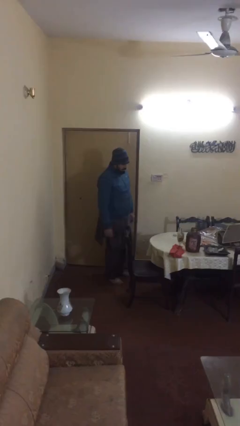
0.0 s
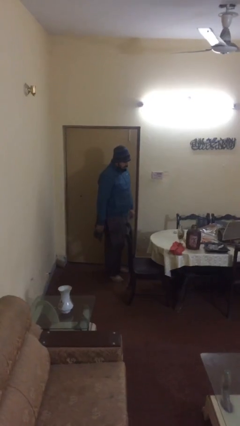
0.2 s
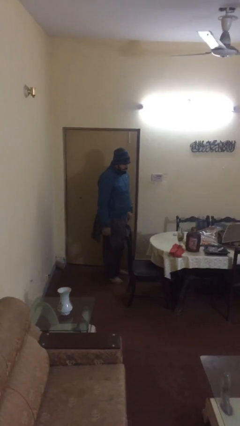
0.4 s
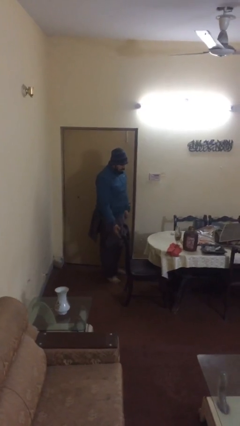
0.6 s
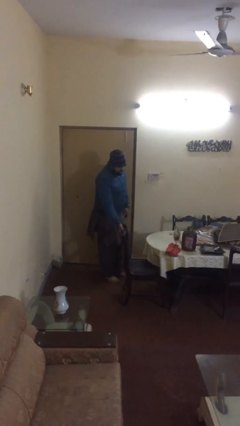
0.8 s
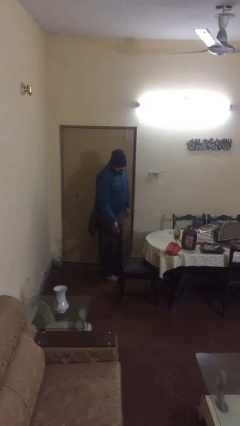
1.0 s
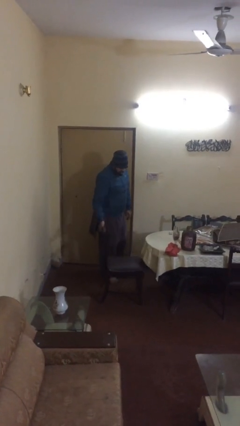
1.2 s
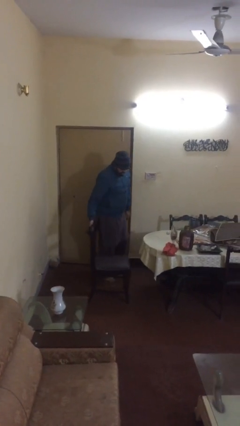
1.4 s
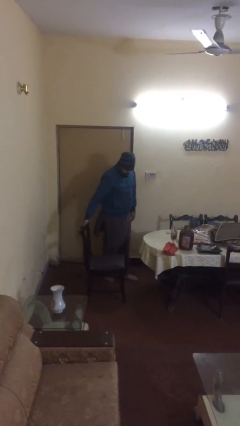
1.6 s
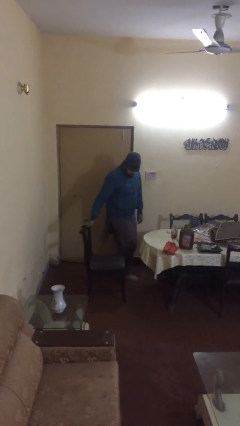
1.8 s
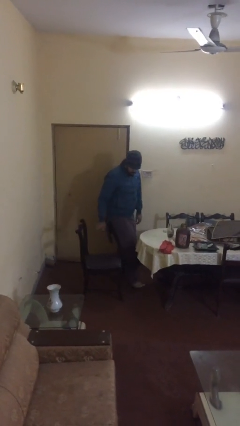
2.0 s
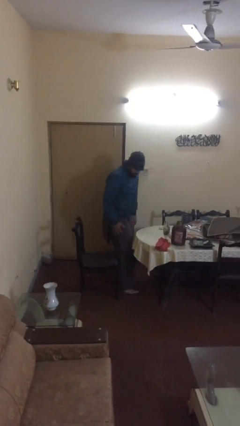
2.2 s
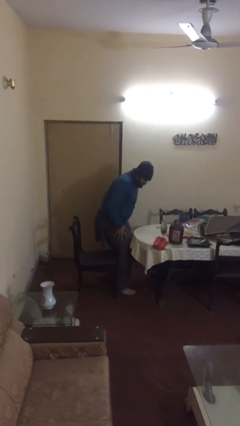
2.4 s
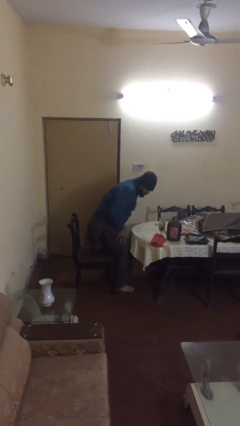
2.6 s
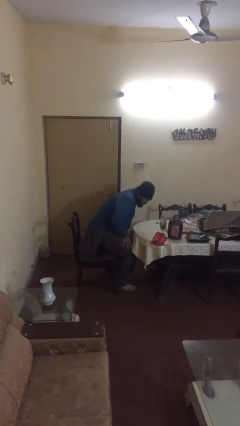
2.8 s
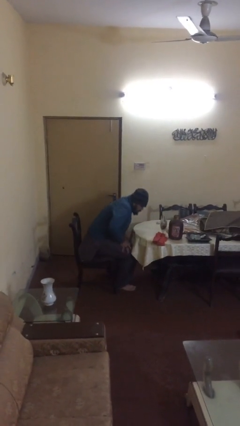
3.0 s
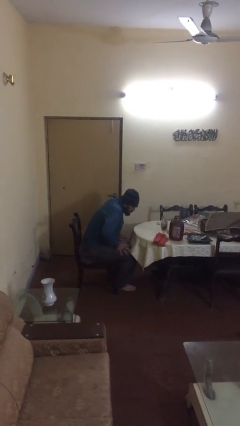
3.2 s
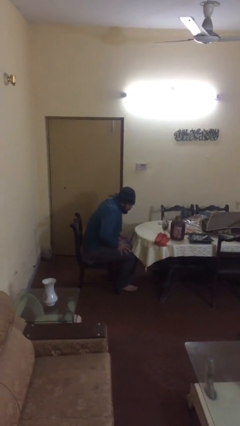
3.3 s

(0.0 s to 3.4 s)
person sits down

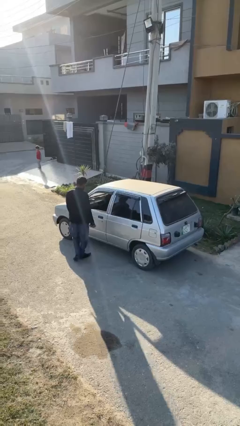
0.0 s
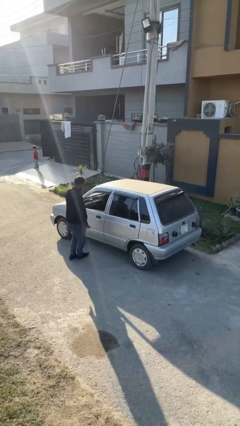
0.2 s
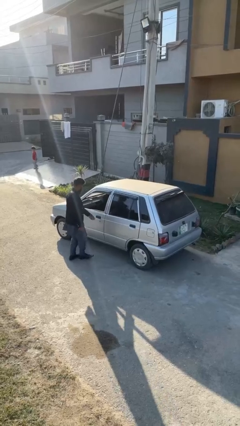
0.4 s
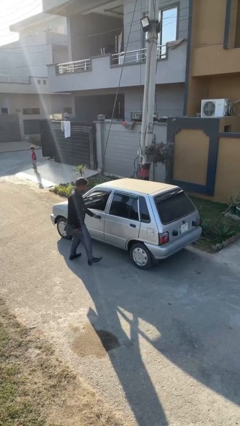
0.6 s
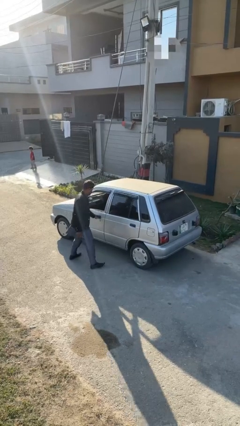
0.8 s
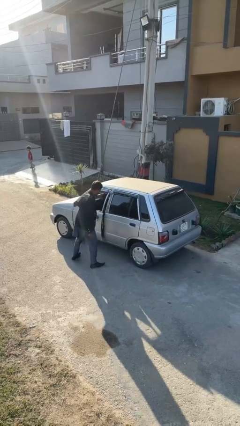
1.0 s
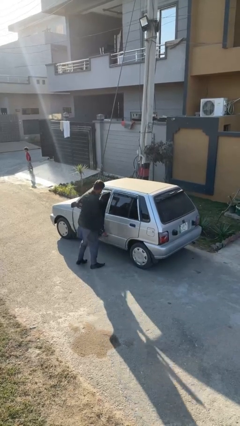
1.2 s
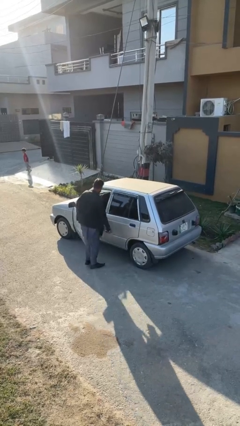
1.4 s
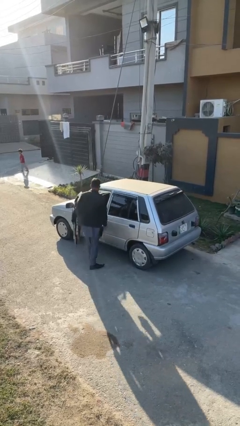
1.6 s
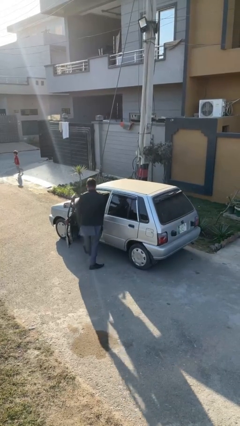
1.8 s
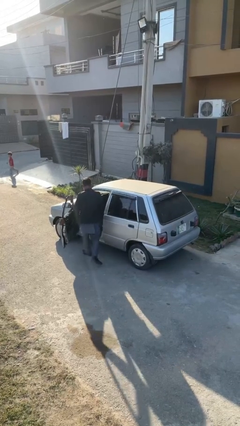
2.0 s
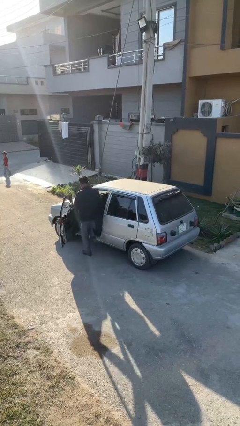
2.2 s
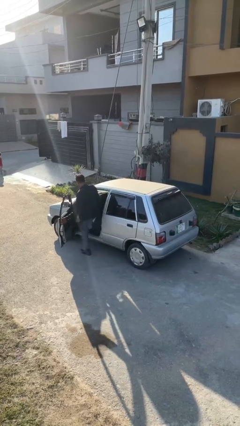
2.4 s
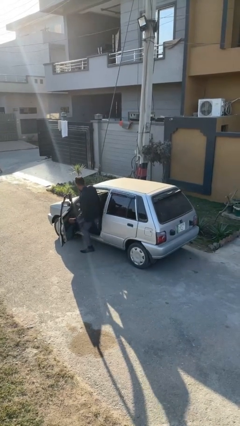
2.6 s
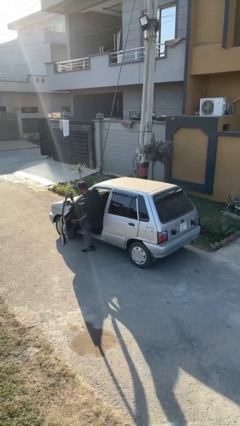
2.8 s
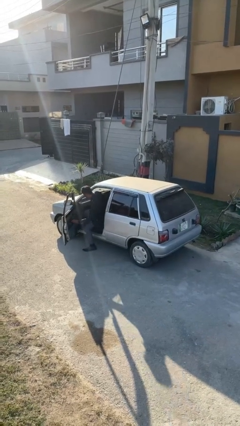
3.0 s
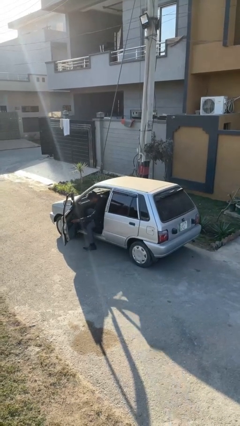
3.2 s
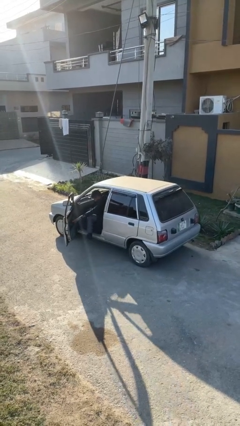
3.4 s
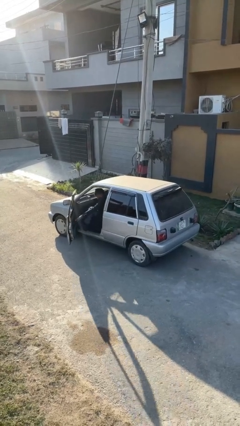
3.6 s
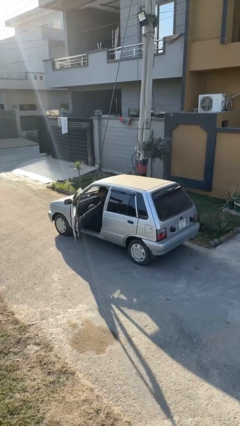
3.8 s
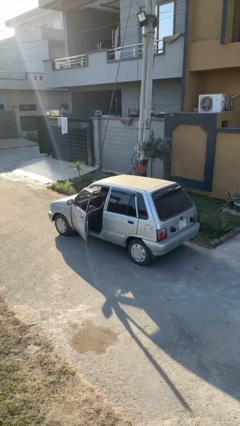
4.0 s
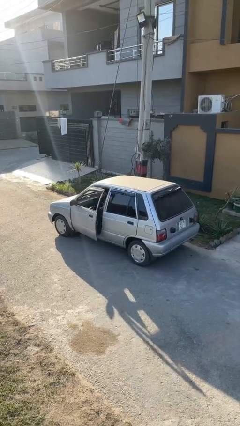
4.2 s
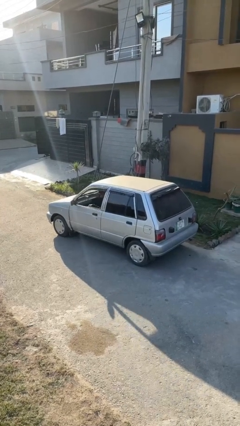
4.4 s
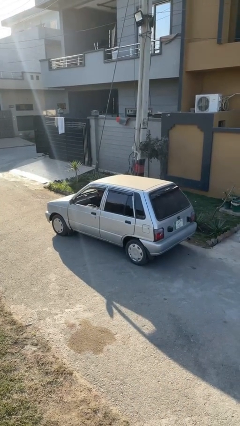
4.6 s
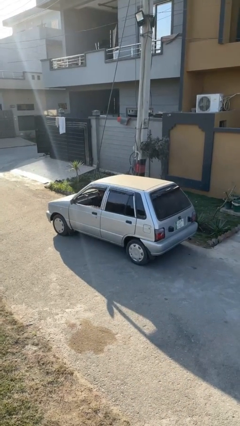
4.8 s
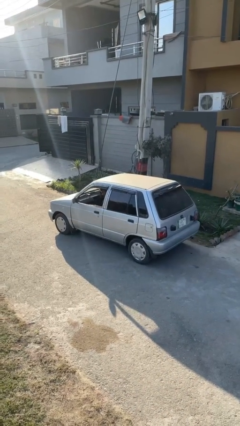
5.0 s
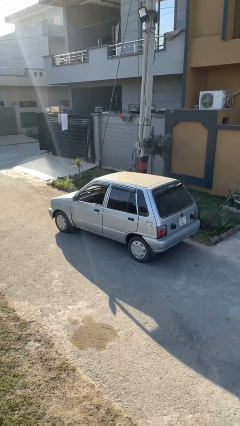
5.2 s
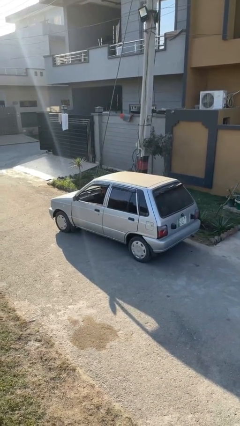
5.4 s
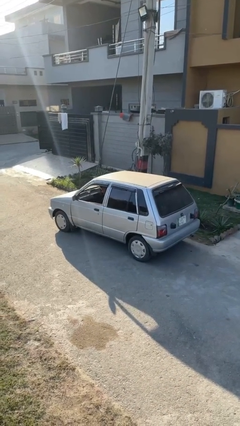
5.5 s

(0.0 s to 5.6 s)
car picks up person

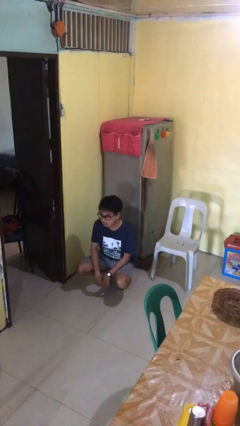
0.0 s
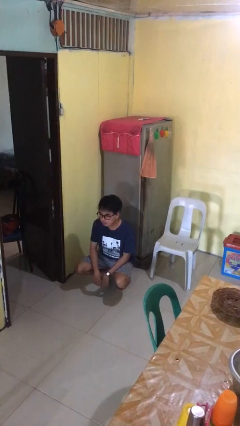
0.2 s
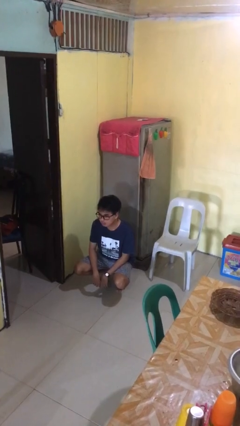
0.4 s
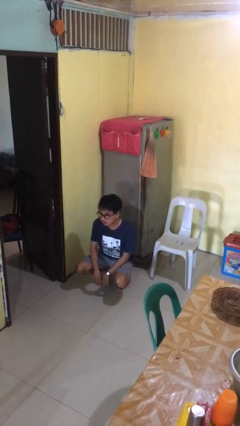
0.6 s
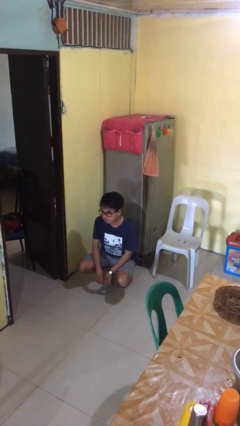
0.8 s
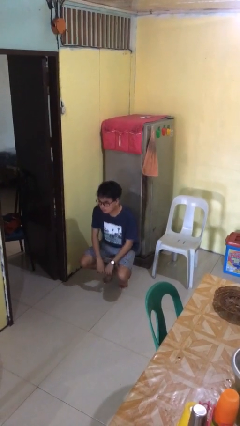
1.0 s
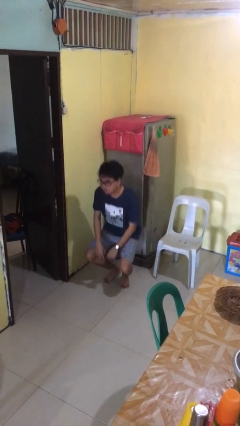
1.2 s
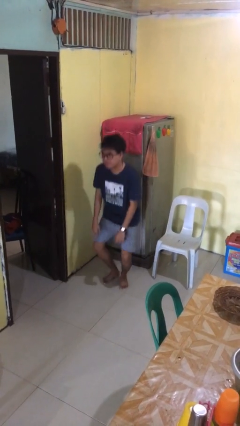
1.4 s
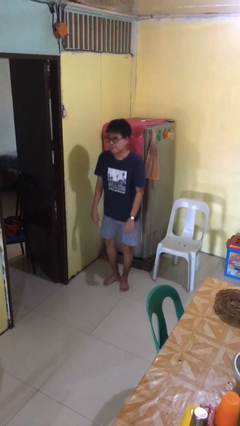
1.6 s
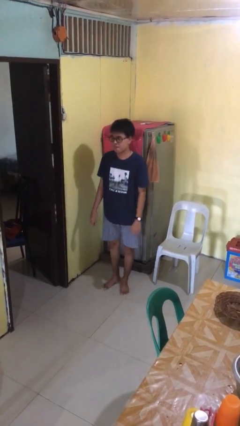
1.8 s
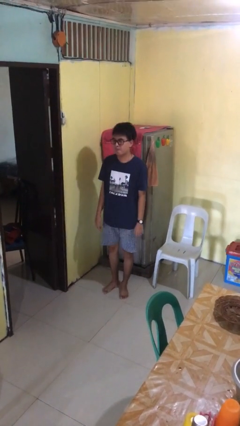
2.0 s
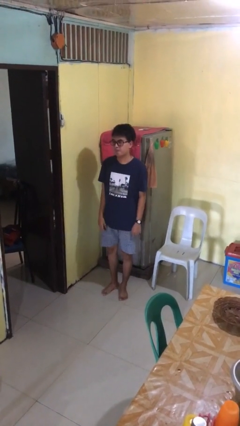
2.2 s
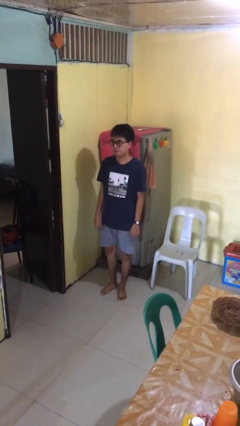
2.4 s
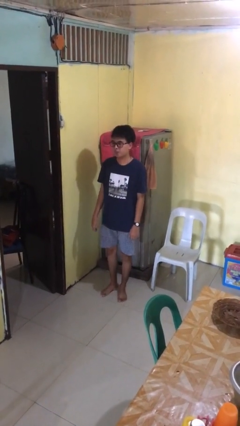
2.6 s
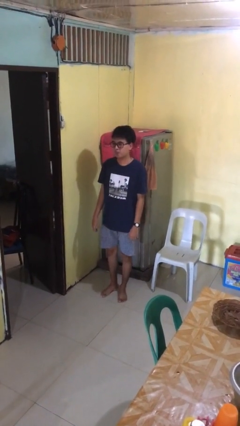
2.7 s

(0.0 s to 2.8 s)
person stands up

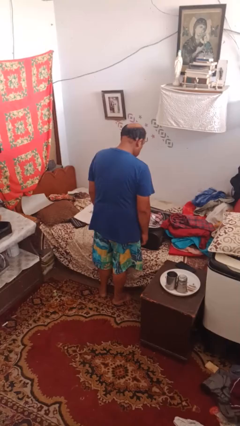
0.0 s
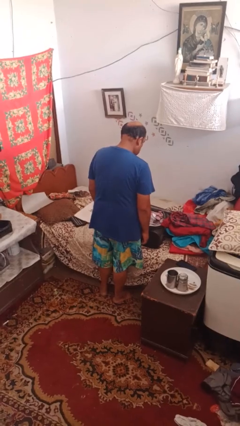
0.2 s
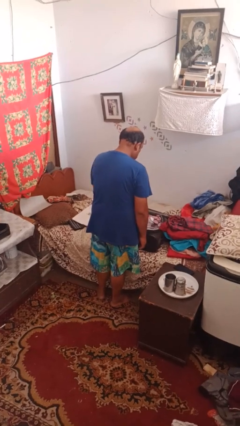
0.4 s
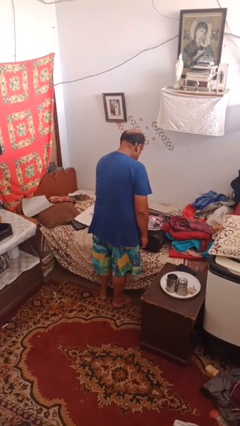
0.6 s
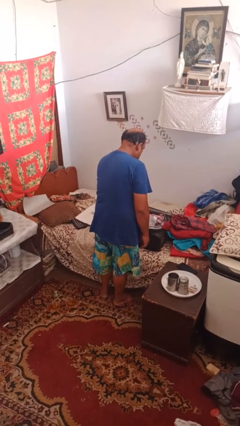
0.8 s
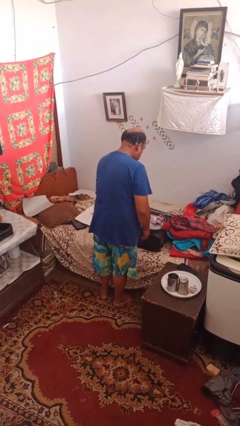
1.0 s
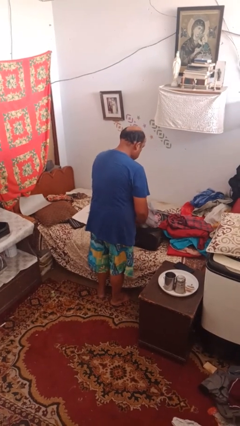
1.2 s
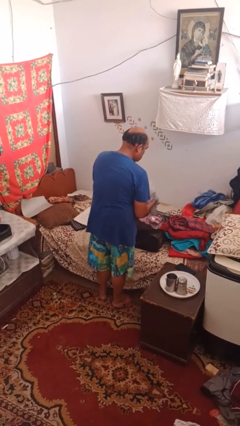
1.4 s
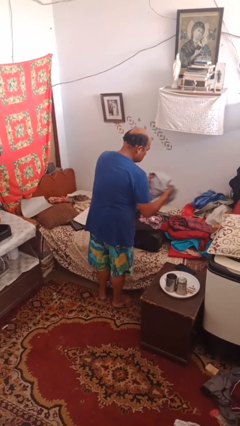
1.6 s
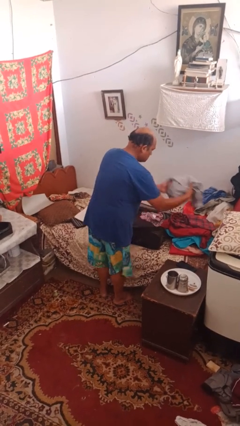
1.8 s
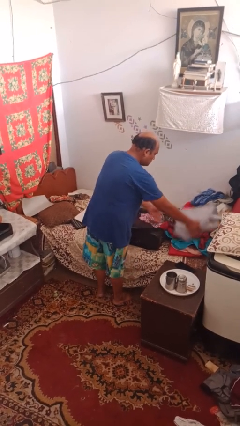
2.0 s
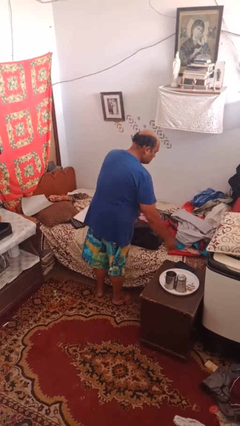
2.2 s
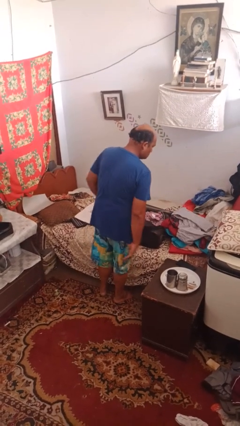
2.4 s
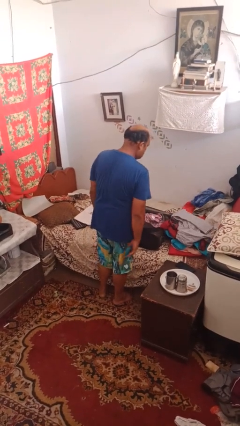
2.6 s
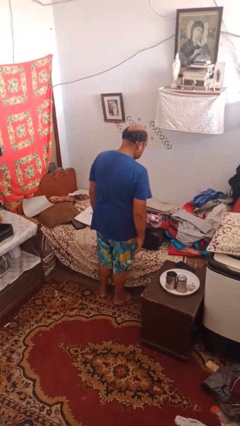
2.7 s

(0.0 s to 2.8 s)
person unloads clothes from suitcase

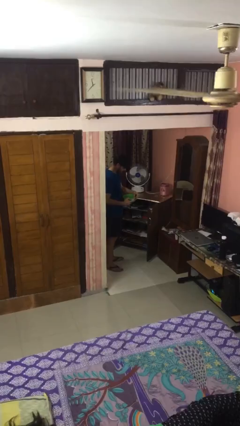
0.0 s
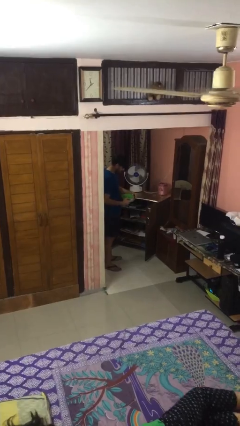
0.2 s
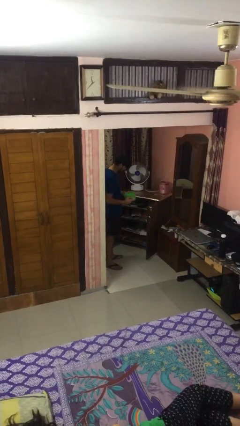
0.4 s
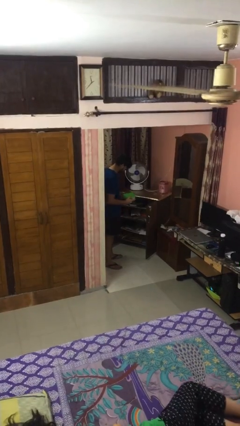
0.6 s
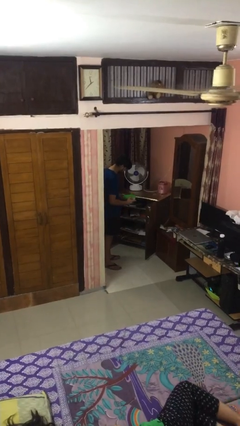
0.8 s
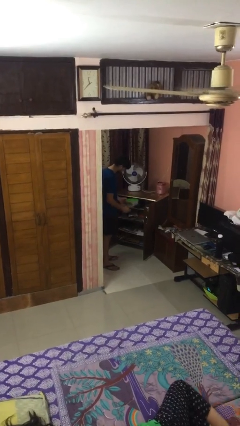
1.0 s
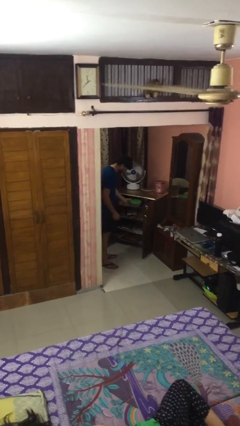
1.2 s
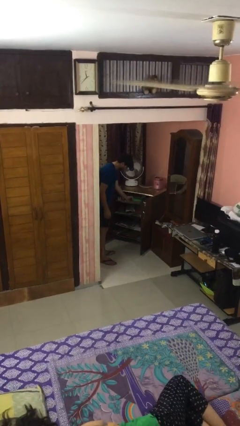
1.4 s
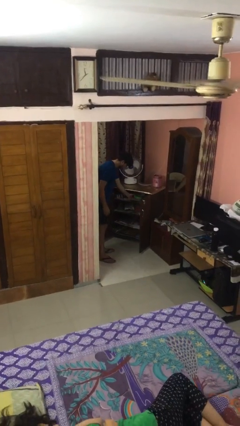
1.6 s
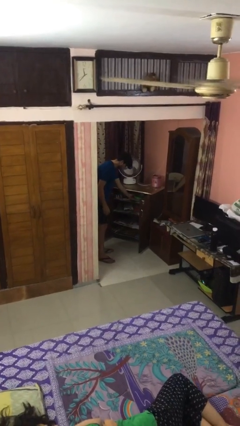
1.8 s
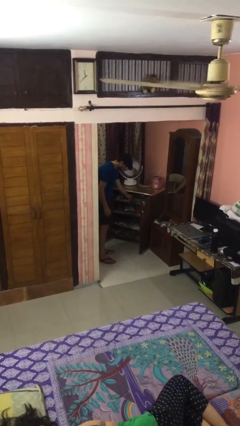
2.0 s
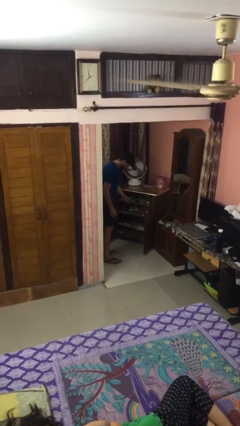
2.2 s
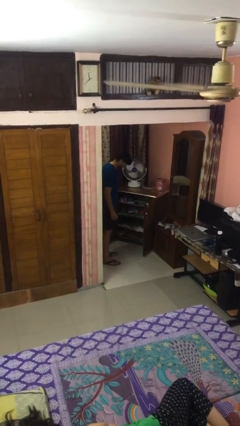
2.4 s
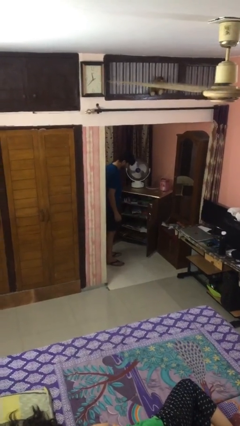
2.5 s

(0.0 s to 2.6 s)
person puts down object into cabinet

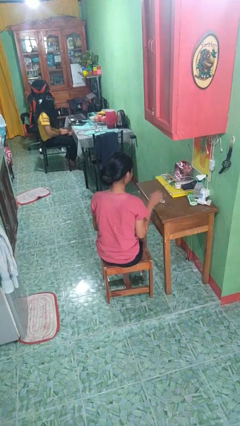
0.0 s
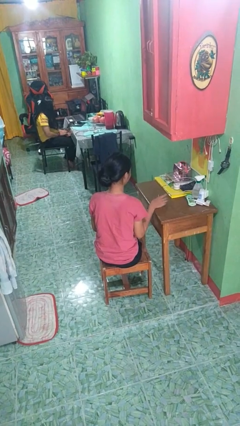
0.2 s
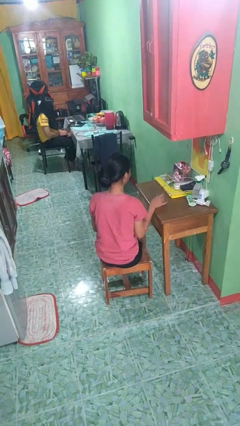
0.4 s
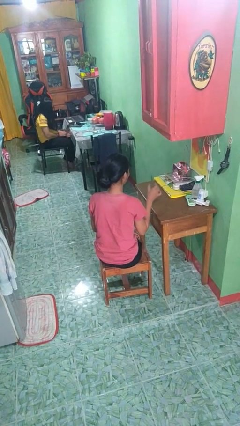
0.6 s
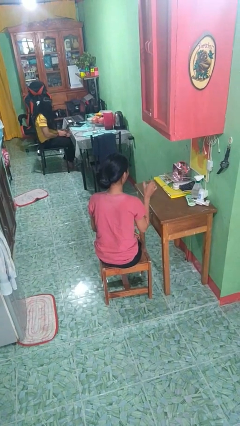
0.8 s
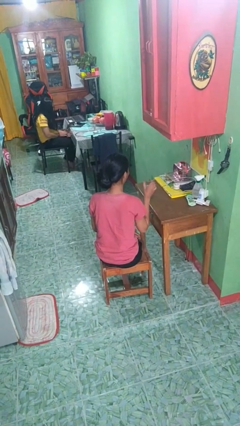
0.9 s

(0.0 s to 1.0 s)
person picks up object from table
